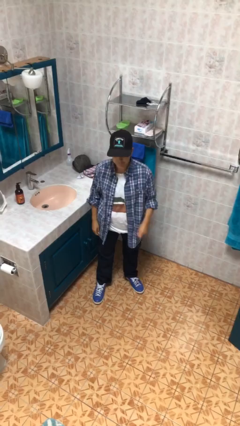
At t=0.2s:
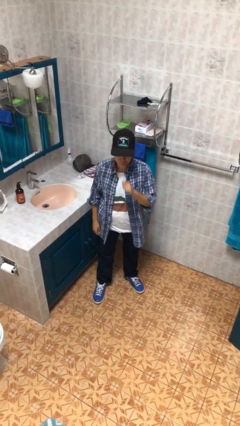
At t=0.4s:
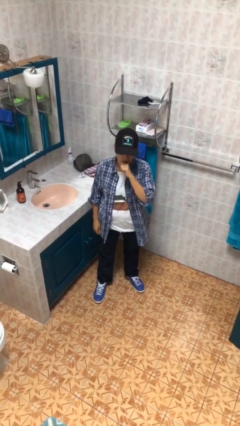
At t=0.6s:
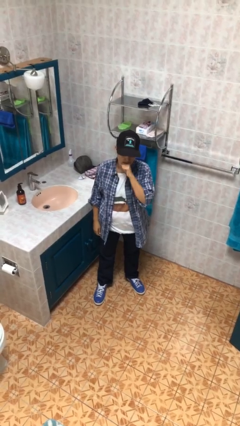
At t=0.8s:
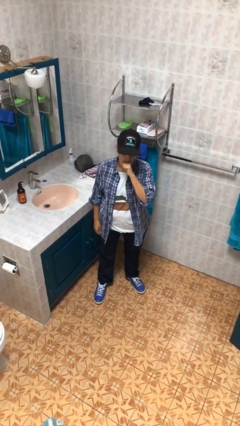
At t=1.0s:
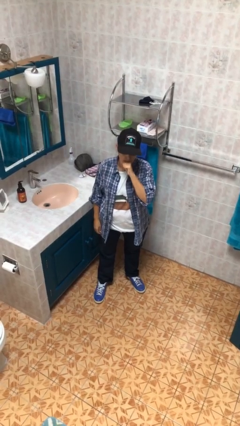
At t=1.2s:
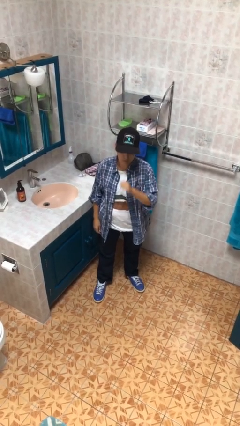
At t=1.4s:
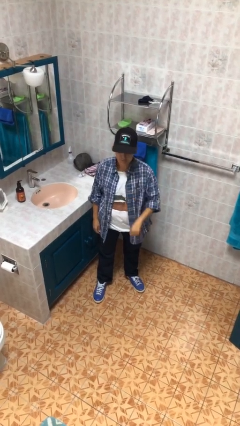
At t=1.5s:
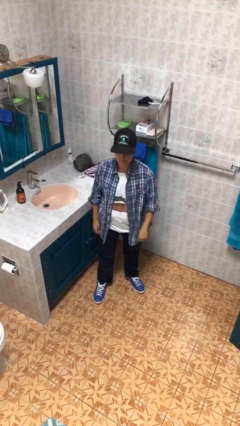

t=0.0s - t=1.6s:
person yawns

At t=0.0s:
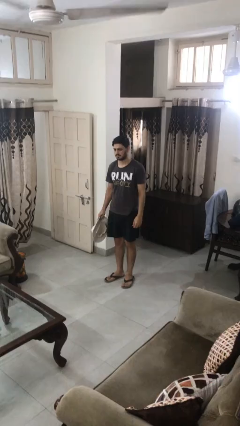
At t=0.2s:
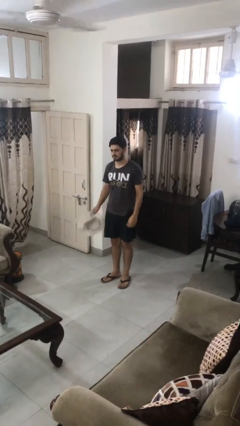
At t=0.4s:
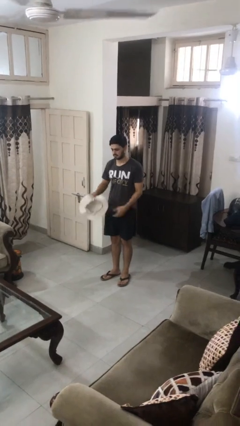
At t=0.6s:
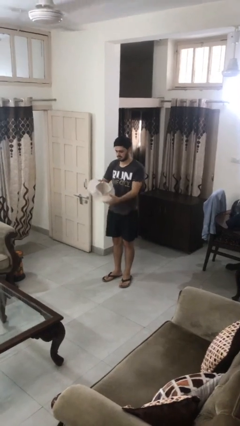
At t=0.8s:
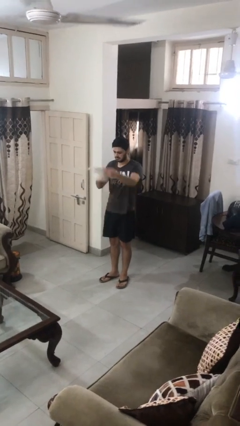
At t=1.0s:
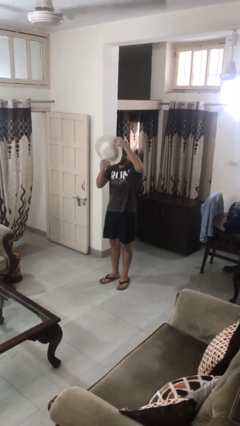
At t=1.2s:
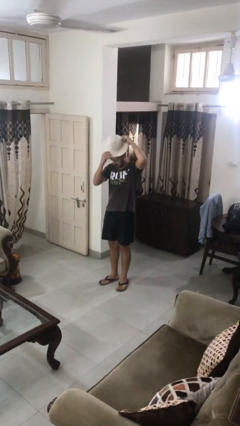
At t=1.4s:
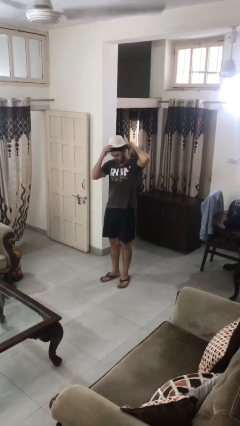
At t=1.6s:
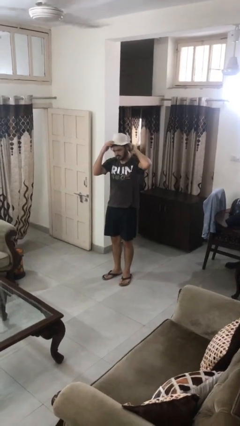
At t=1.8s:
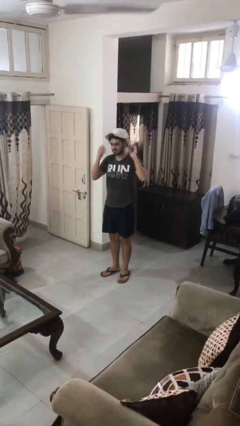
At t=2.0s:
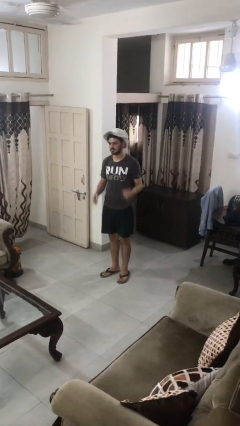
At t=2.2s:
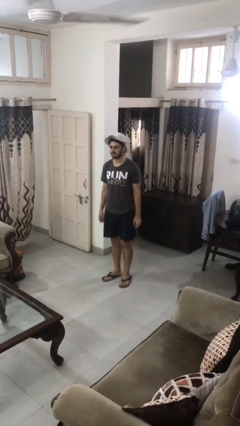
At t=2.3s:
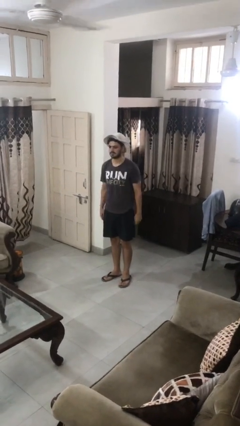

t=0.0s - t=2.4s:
person puts on hat

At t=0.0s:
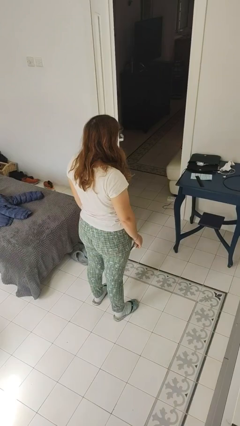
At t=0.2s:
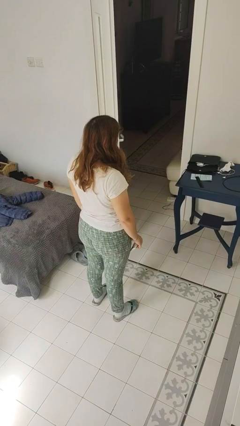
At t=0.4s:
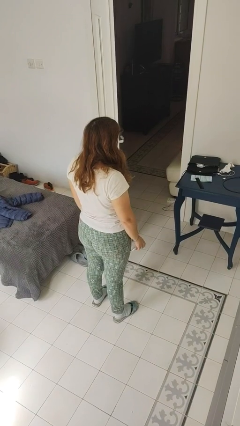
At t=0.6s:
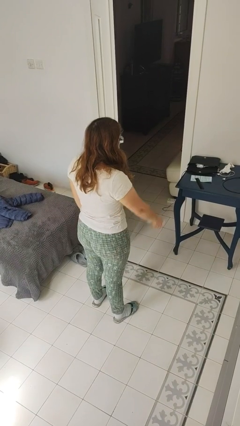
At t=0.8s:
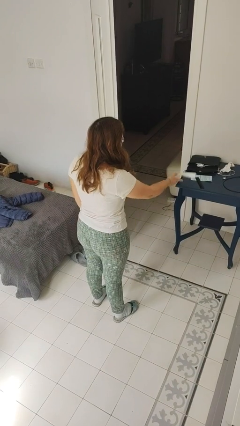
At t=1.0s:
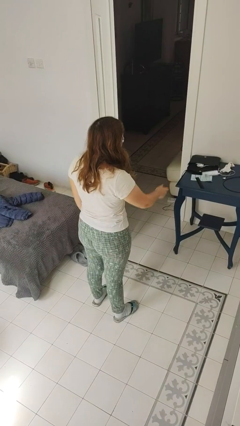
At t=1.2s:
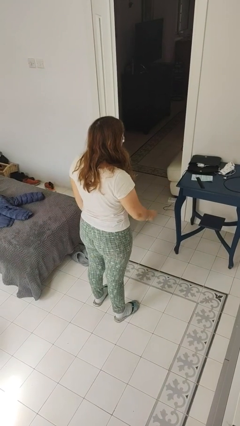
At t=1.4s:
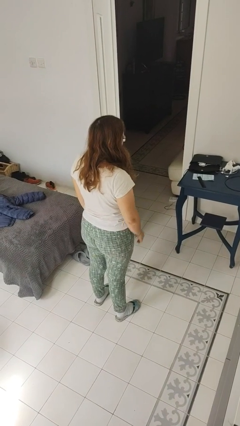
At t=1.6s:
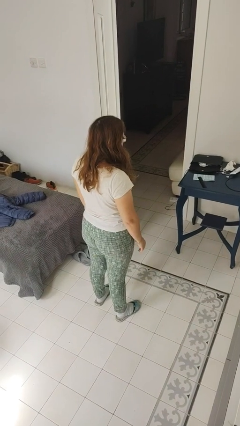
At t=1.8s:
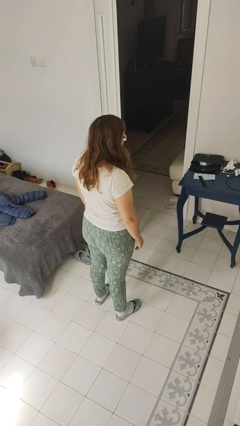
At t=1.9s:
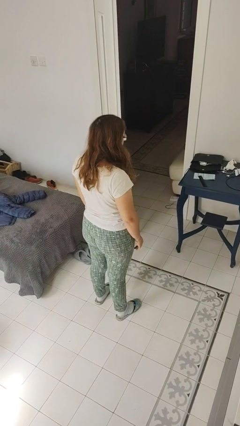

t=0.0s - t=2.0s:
person throws object on table

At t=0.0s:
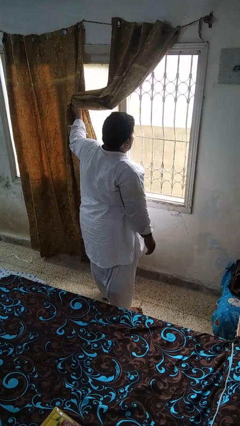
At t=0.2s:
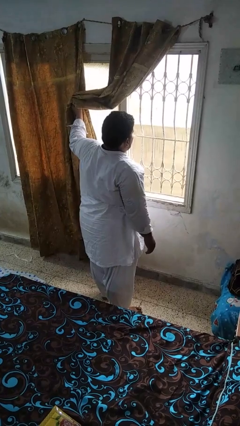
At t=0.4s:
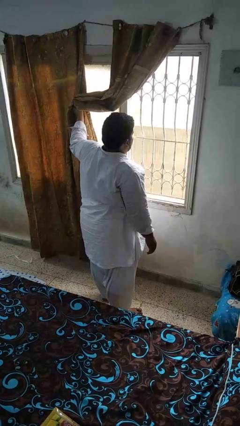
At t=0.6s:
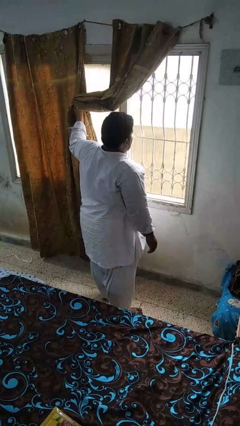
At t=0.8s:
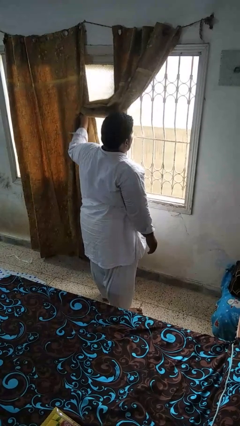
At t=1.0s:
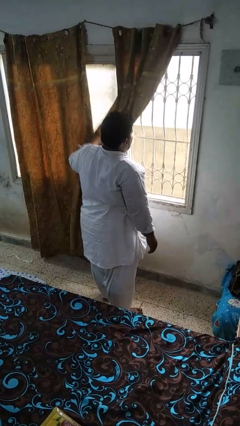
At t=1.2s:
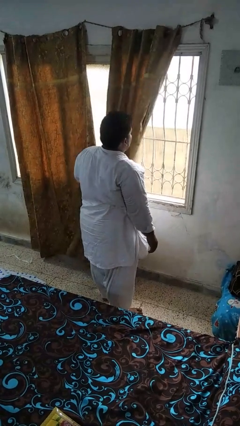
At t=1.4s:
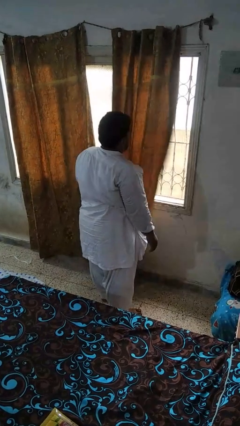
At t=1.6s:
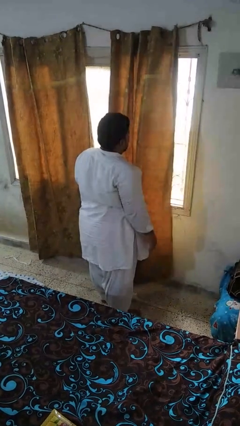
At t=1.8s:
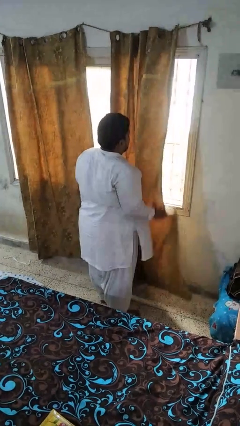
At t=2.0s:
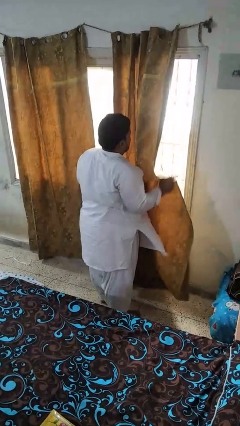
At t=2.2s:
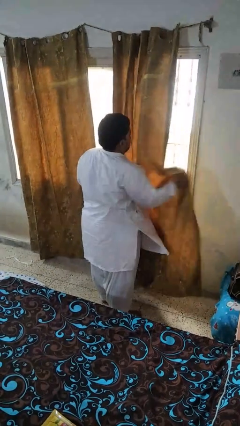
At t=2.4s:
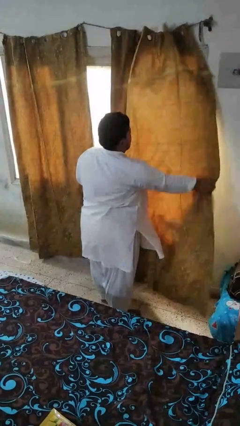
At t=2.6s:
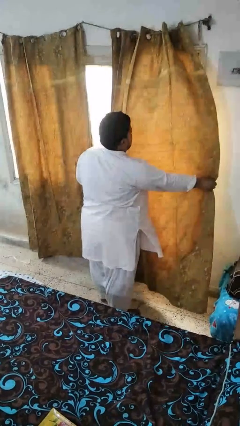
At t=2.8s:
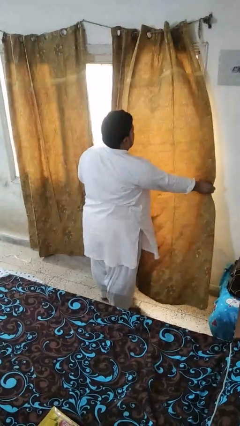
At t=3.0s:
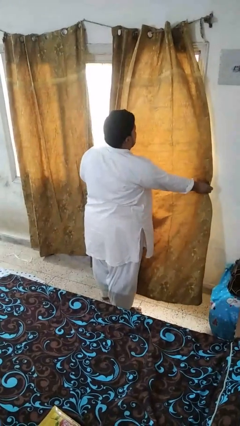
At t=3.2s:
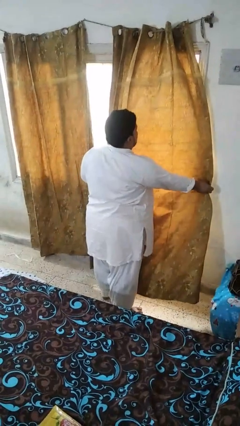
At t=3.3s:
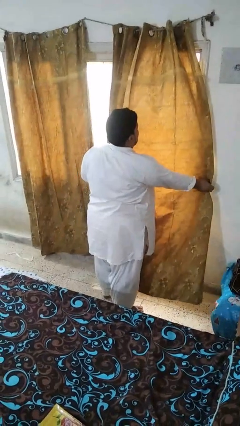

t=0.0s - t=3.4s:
person closes curtains

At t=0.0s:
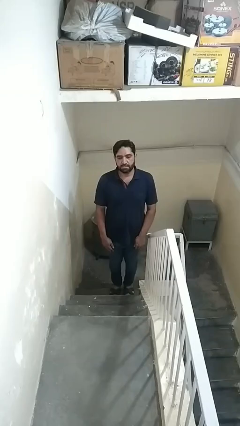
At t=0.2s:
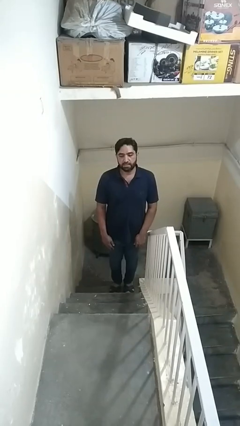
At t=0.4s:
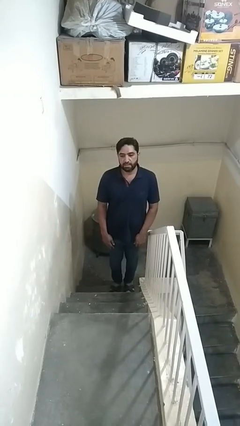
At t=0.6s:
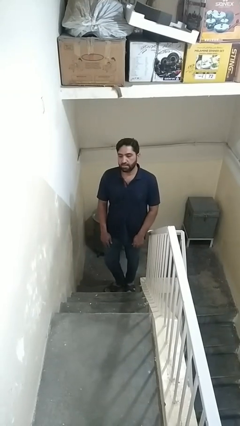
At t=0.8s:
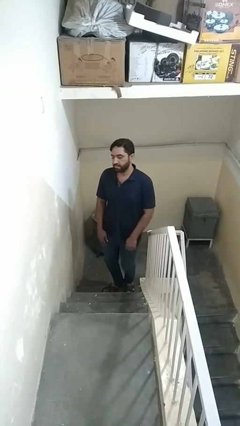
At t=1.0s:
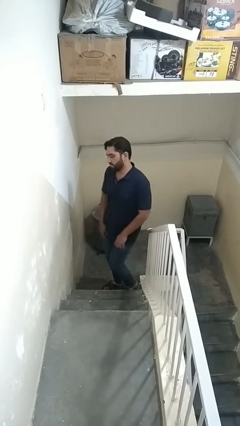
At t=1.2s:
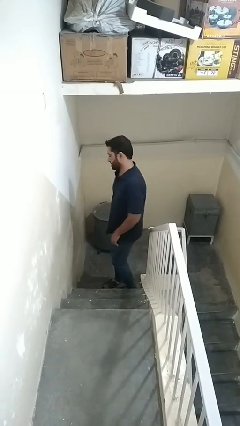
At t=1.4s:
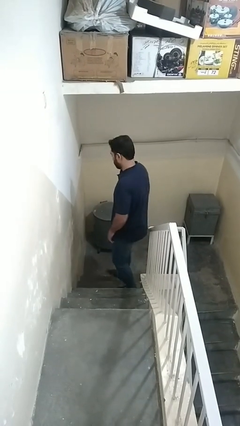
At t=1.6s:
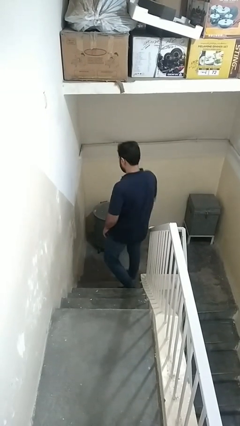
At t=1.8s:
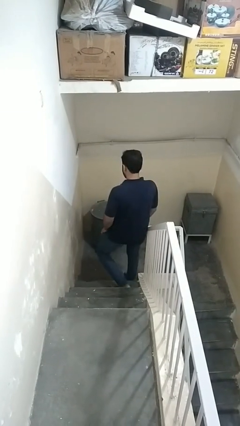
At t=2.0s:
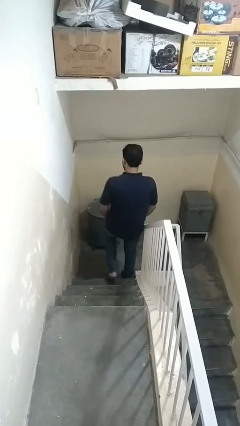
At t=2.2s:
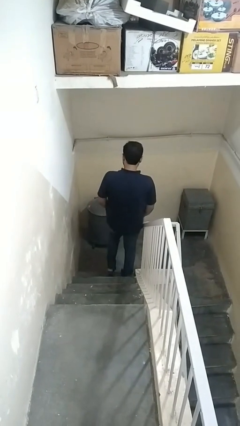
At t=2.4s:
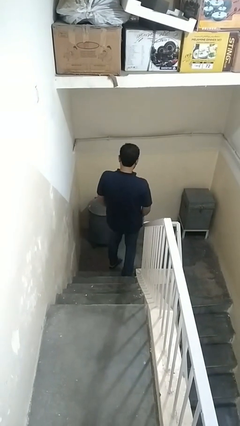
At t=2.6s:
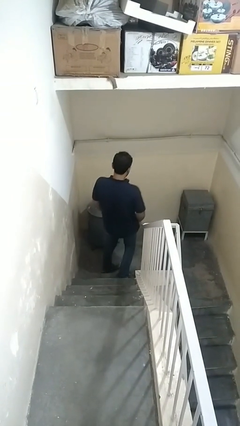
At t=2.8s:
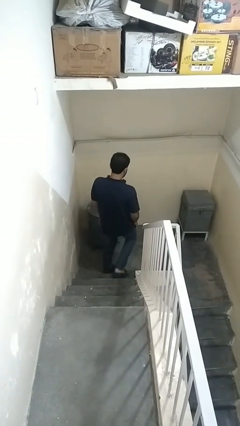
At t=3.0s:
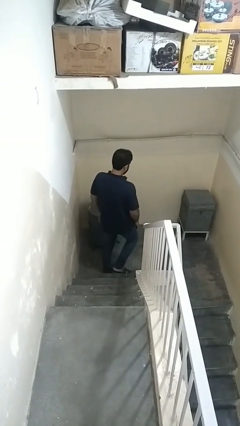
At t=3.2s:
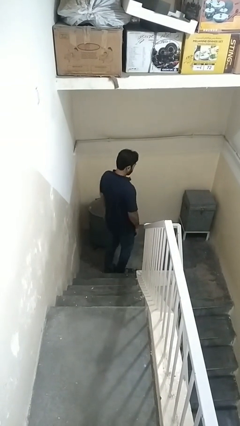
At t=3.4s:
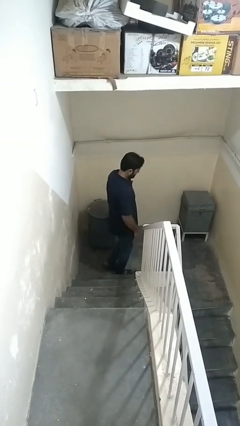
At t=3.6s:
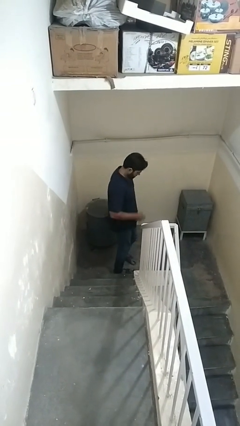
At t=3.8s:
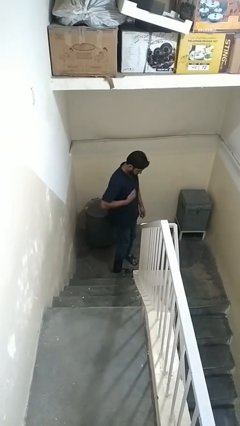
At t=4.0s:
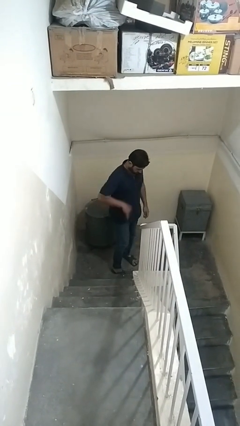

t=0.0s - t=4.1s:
person climbs down stairs

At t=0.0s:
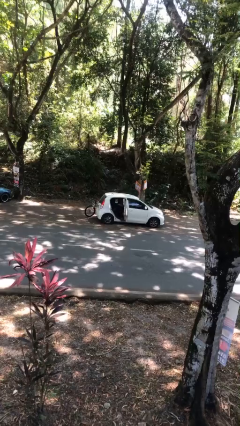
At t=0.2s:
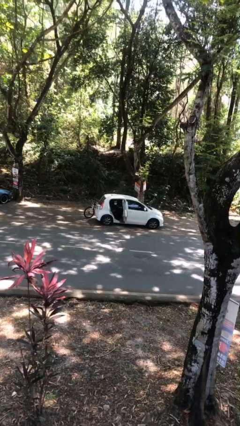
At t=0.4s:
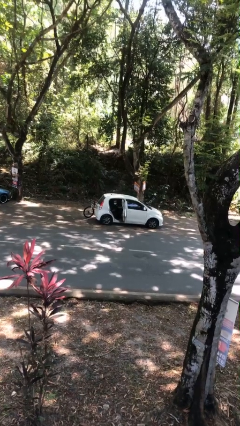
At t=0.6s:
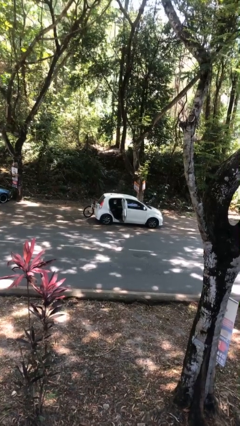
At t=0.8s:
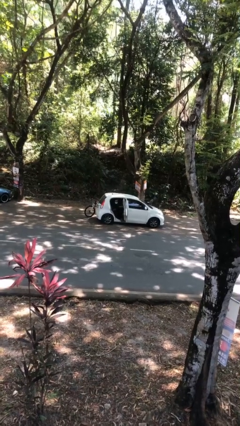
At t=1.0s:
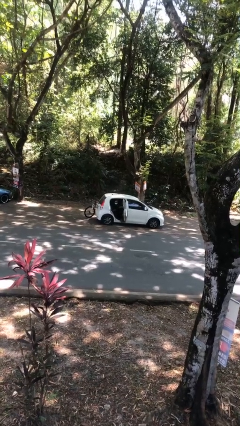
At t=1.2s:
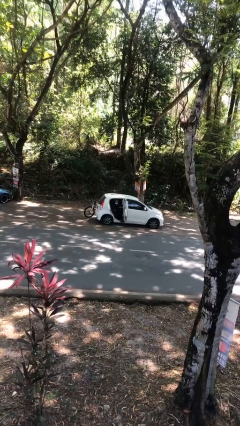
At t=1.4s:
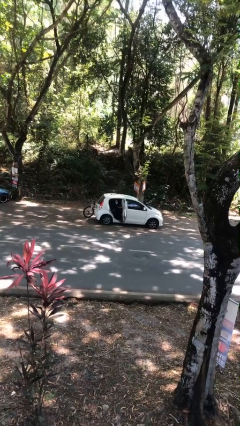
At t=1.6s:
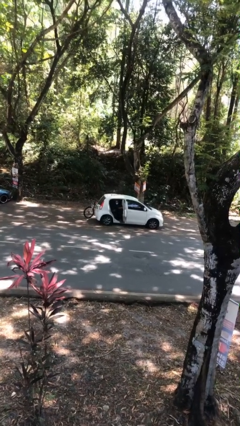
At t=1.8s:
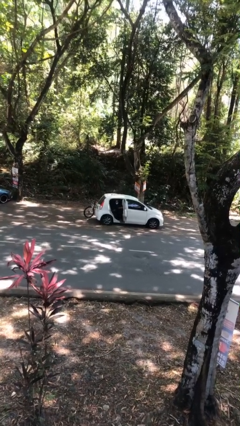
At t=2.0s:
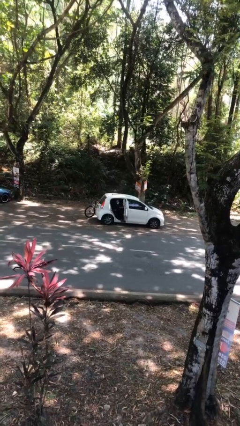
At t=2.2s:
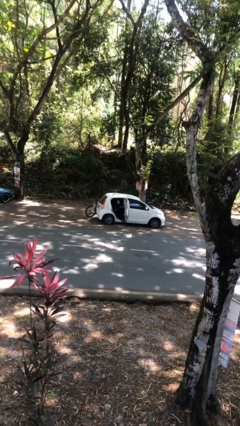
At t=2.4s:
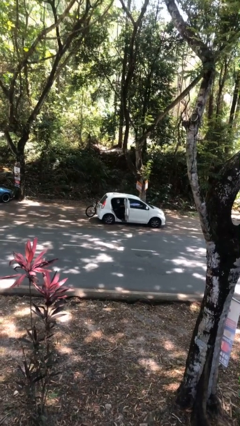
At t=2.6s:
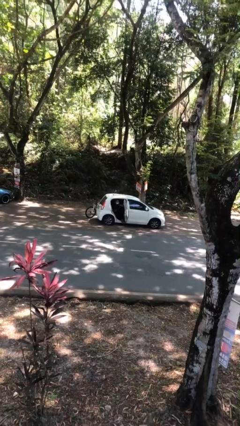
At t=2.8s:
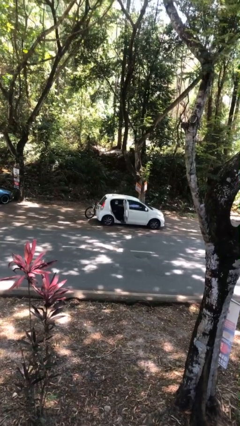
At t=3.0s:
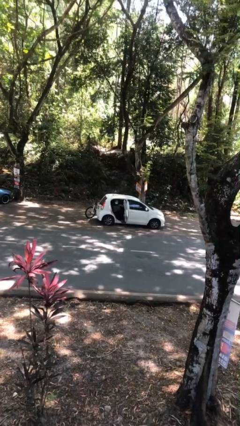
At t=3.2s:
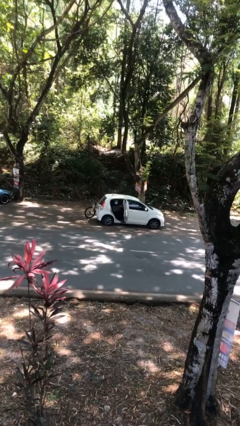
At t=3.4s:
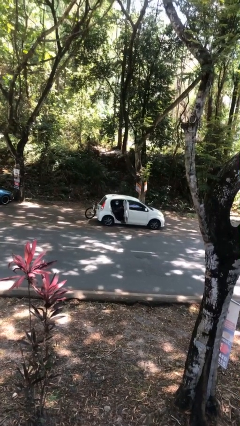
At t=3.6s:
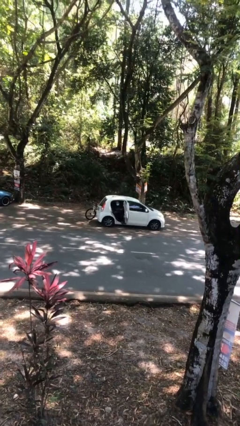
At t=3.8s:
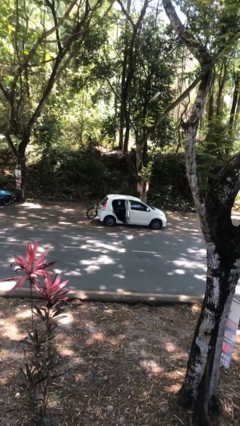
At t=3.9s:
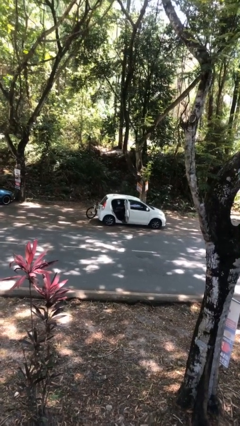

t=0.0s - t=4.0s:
person interacts with laptop

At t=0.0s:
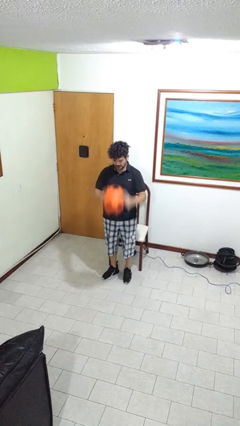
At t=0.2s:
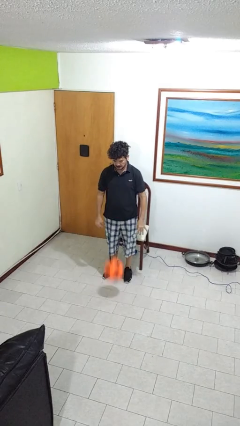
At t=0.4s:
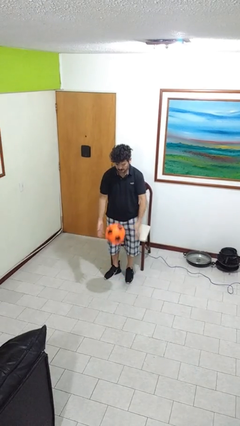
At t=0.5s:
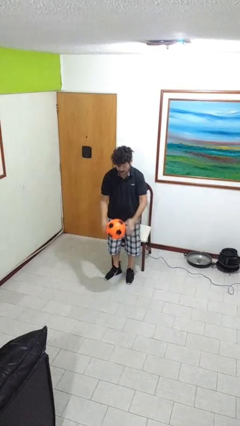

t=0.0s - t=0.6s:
person bounces ball on floor
